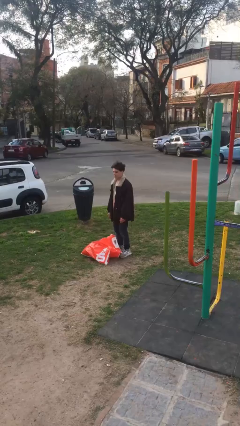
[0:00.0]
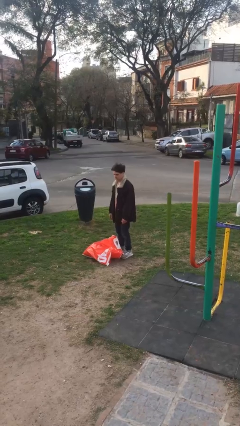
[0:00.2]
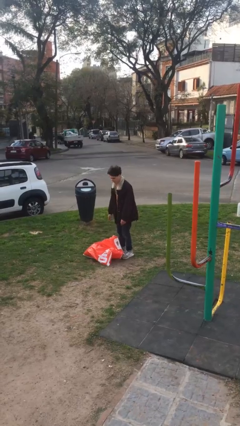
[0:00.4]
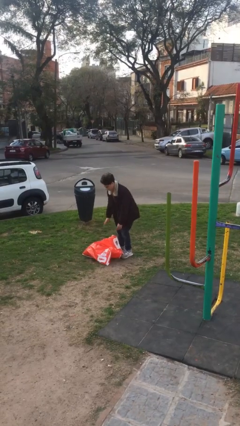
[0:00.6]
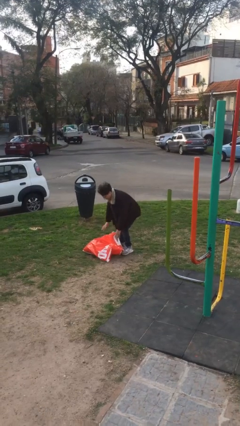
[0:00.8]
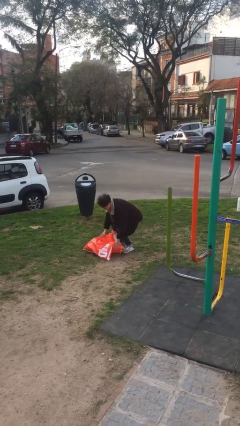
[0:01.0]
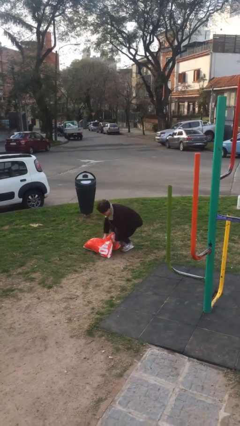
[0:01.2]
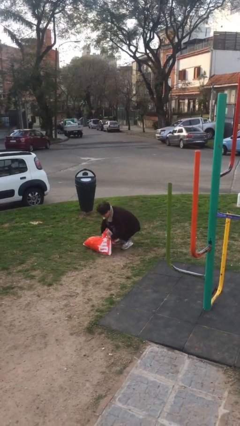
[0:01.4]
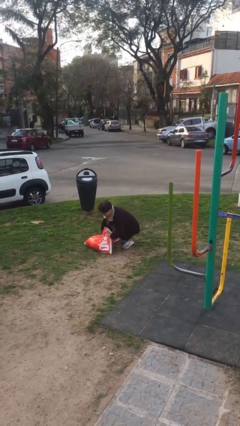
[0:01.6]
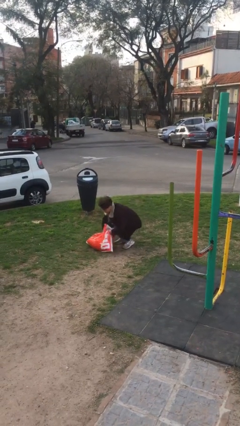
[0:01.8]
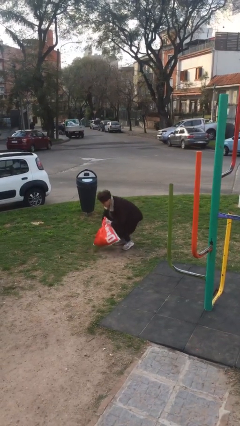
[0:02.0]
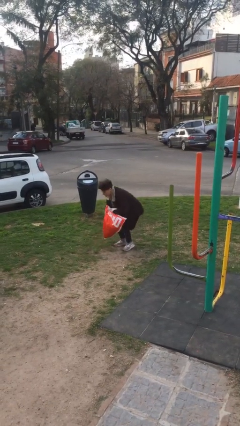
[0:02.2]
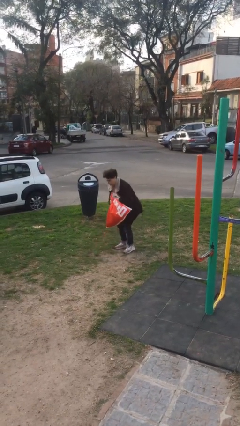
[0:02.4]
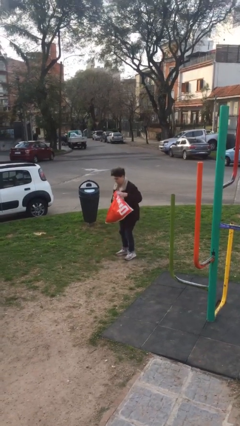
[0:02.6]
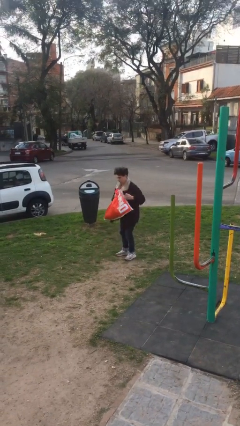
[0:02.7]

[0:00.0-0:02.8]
person picks up object from floor

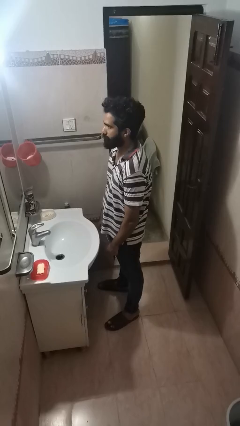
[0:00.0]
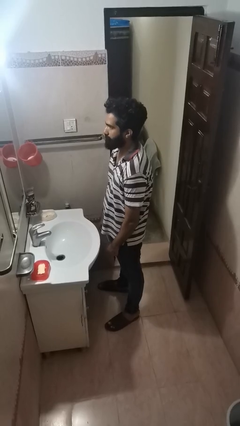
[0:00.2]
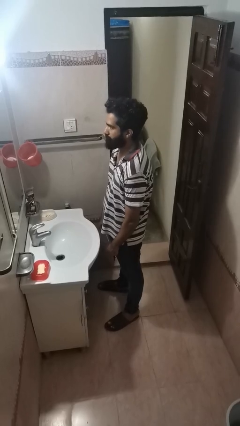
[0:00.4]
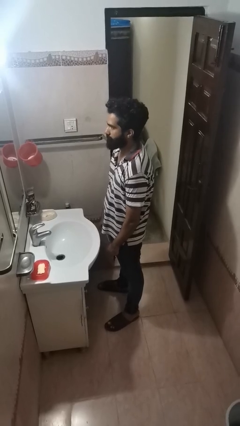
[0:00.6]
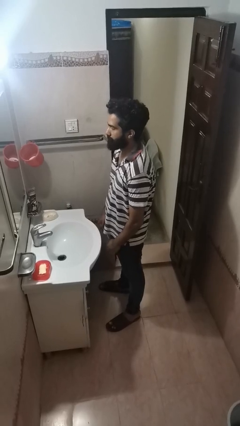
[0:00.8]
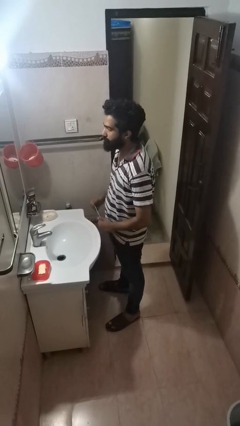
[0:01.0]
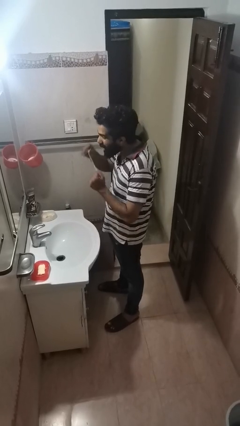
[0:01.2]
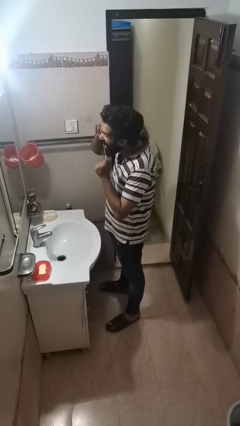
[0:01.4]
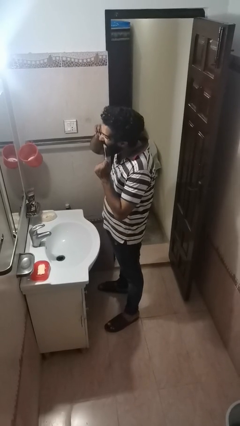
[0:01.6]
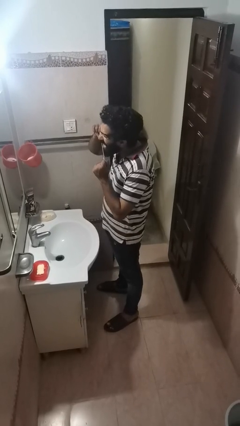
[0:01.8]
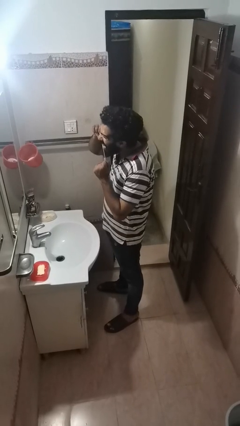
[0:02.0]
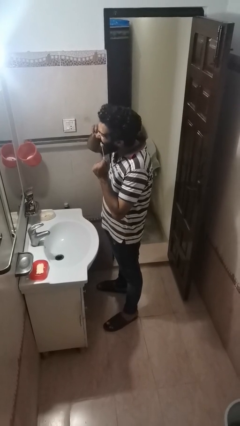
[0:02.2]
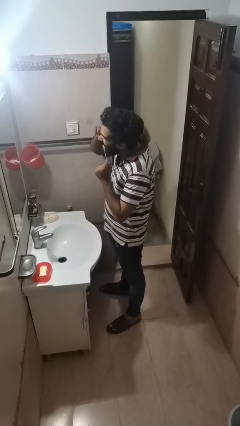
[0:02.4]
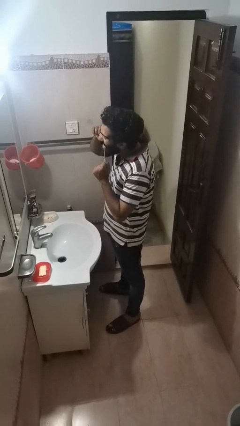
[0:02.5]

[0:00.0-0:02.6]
person flosses

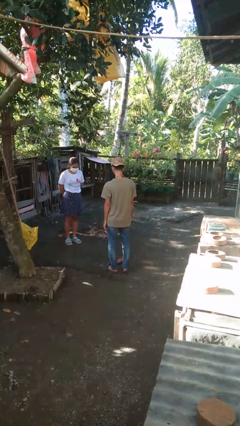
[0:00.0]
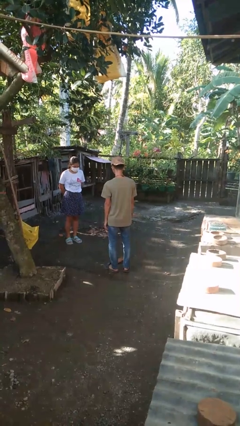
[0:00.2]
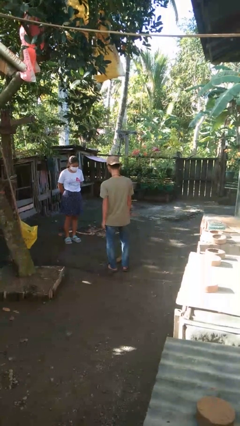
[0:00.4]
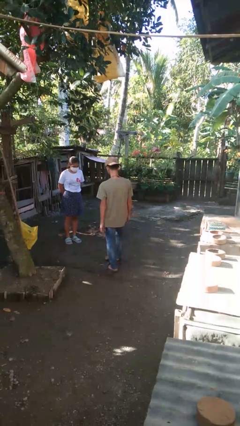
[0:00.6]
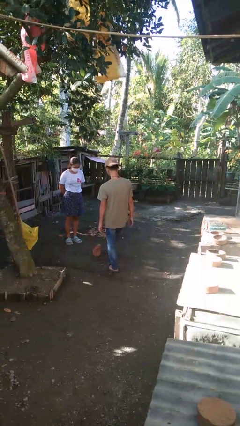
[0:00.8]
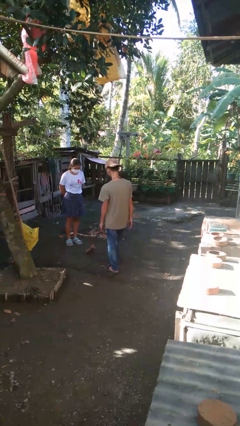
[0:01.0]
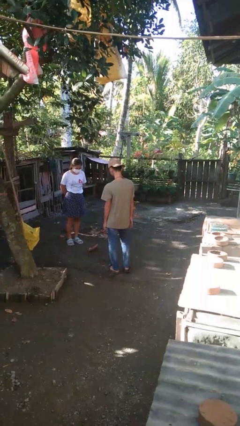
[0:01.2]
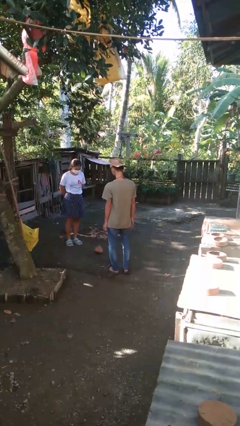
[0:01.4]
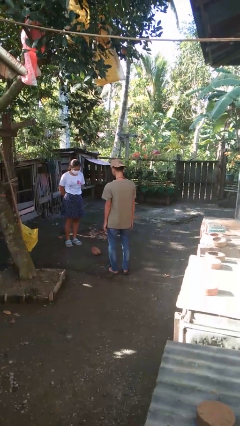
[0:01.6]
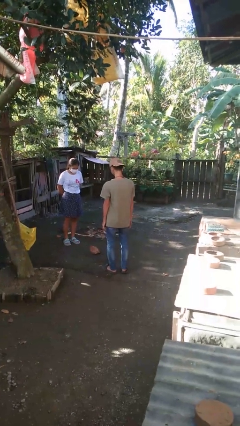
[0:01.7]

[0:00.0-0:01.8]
person kicks object to person

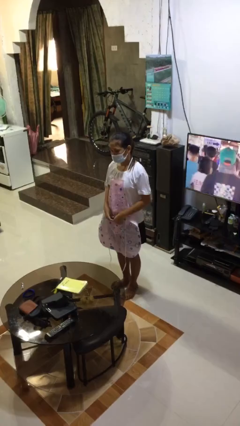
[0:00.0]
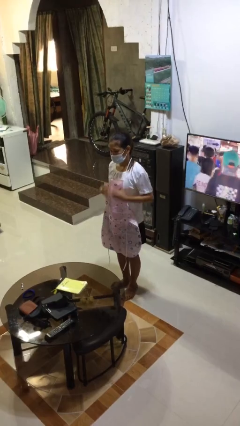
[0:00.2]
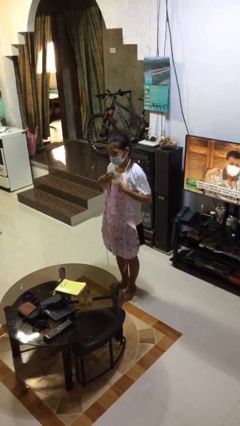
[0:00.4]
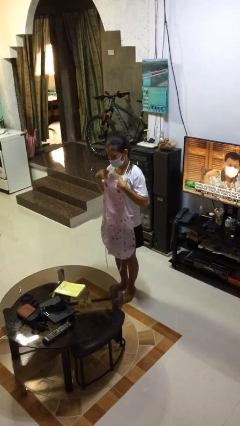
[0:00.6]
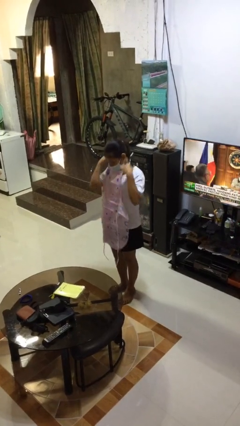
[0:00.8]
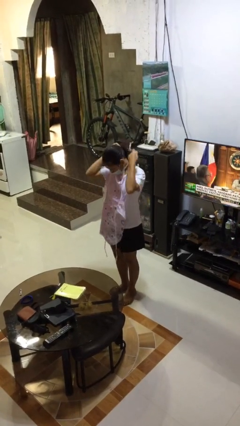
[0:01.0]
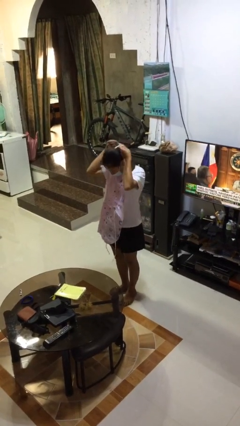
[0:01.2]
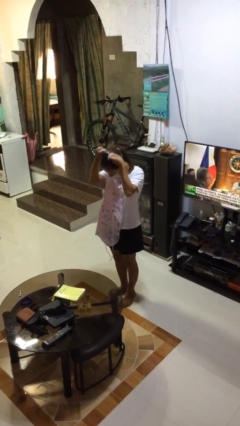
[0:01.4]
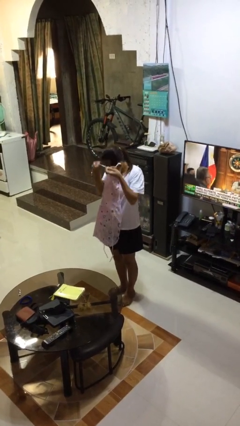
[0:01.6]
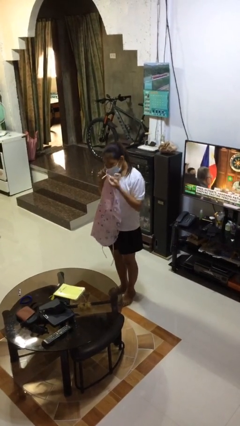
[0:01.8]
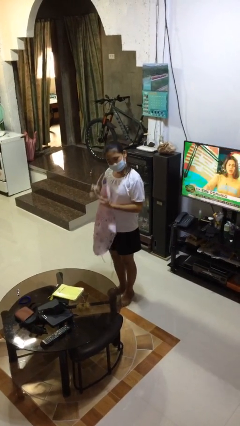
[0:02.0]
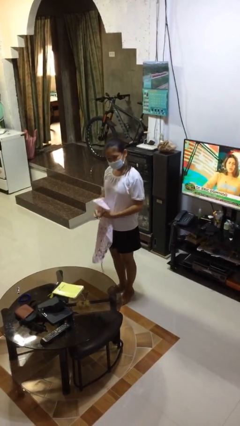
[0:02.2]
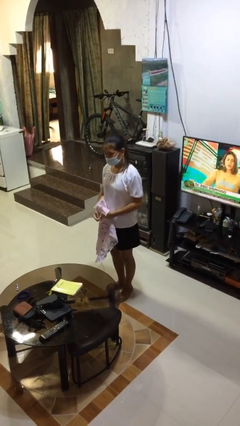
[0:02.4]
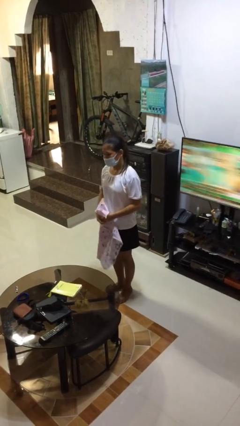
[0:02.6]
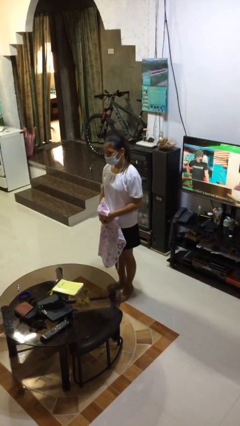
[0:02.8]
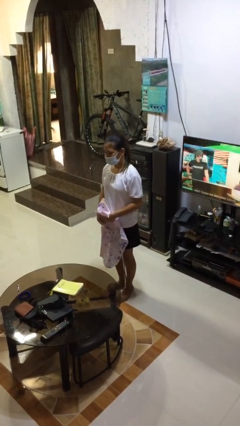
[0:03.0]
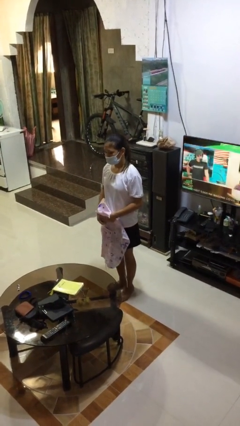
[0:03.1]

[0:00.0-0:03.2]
person takes off apron

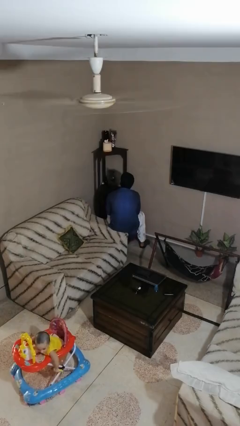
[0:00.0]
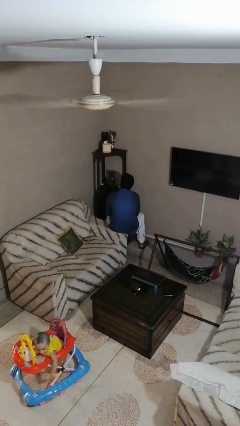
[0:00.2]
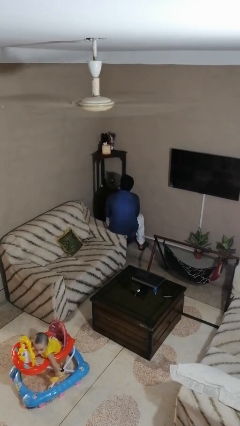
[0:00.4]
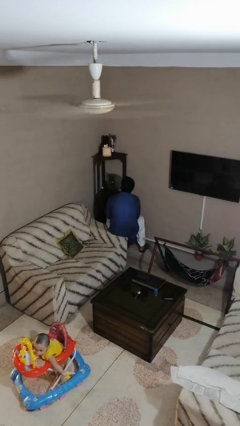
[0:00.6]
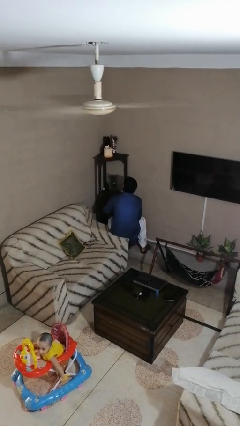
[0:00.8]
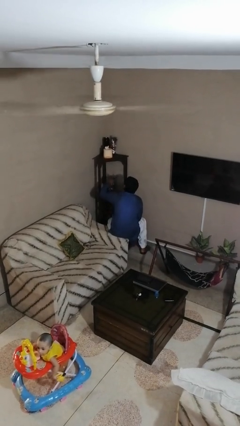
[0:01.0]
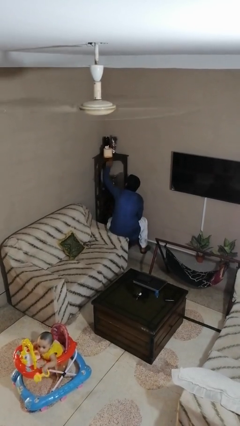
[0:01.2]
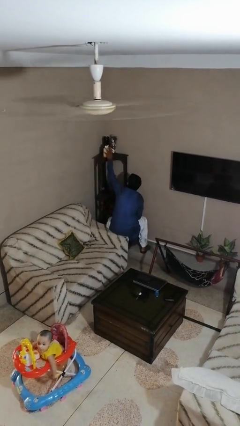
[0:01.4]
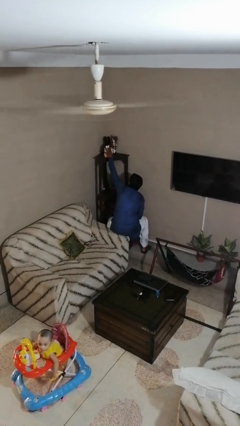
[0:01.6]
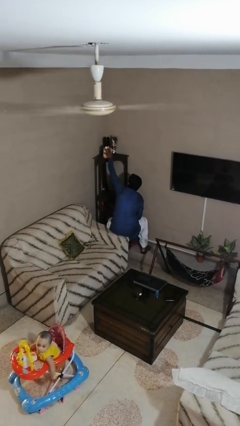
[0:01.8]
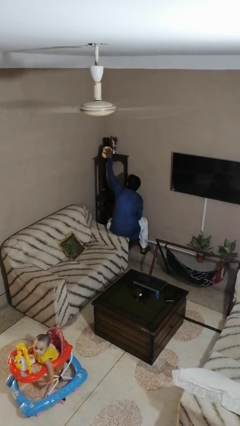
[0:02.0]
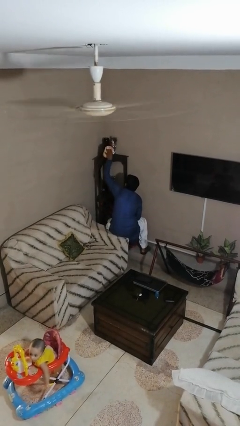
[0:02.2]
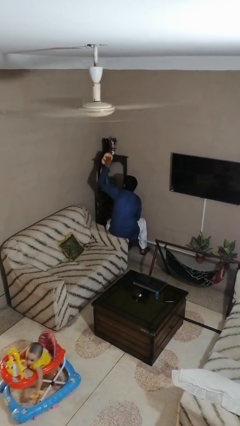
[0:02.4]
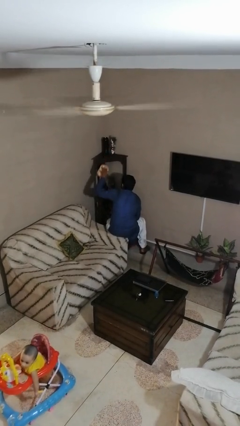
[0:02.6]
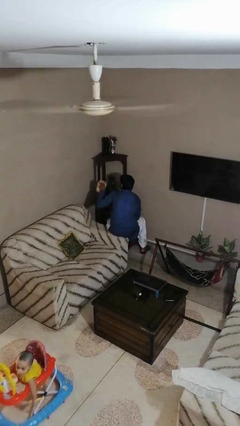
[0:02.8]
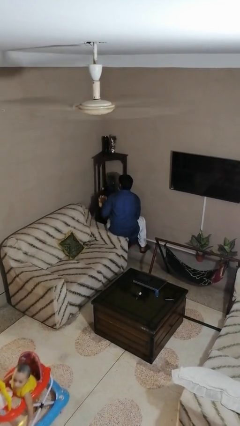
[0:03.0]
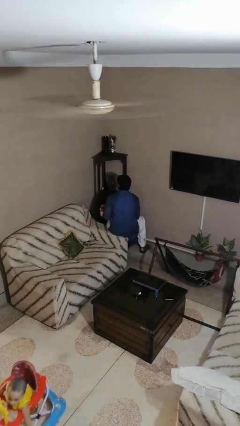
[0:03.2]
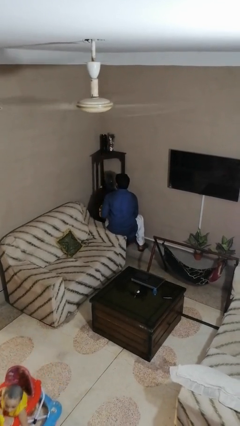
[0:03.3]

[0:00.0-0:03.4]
person picks up object from shelf

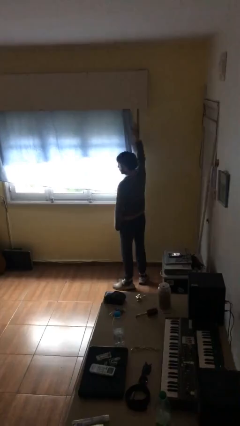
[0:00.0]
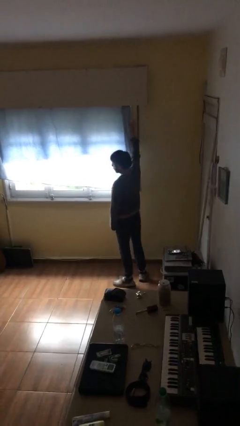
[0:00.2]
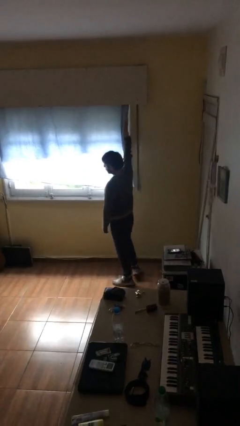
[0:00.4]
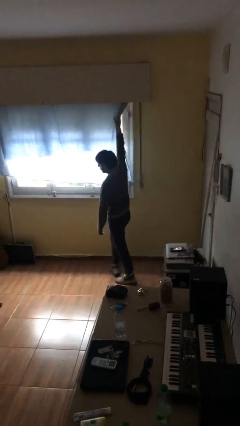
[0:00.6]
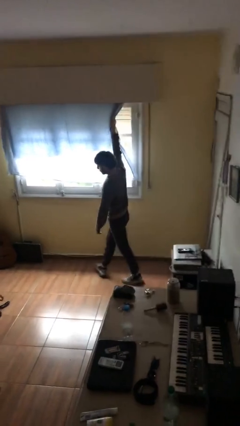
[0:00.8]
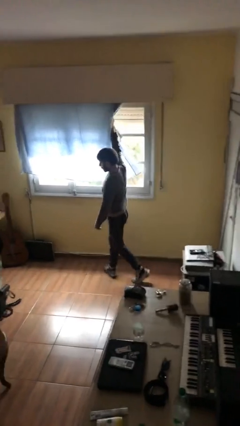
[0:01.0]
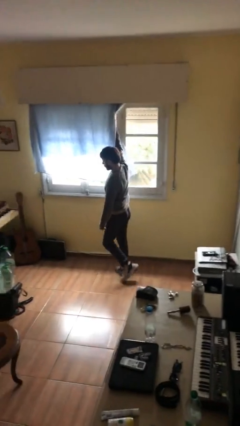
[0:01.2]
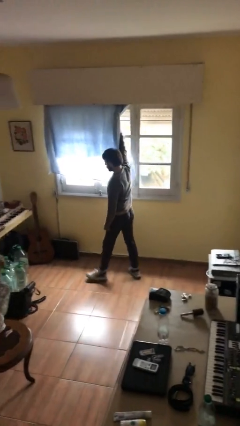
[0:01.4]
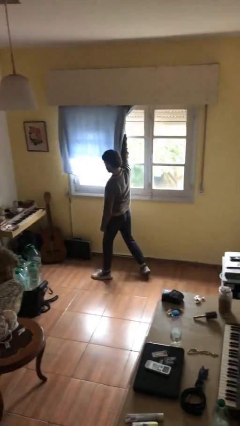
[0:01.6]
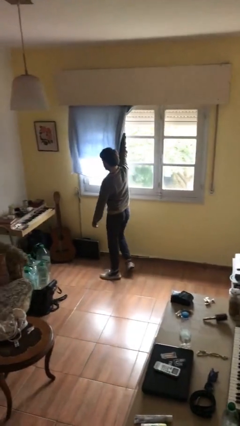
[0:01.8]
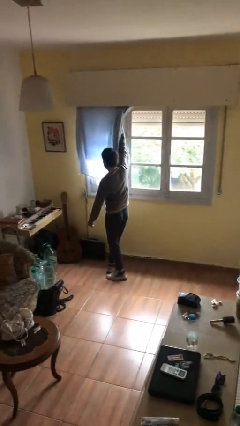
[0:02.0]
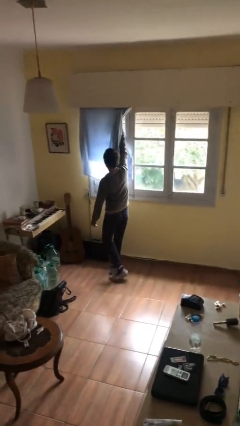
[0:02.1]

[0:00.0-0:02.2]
person opens curtains

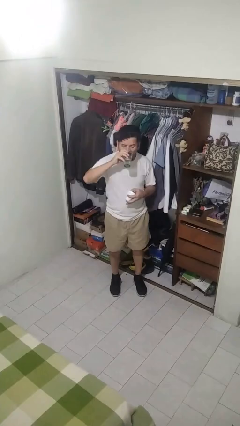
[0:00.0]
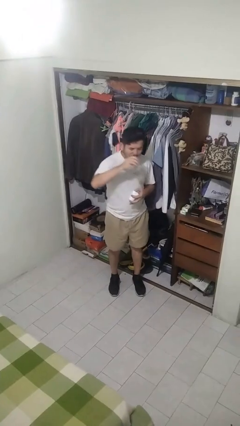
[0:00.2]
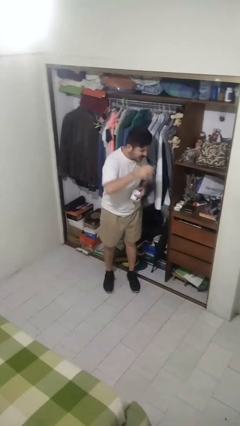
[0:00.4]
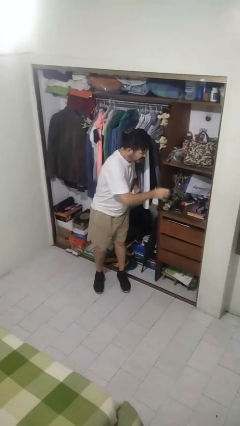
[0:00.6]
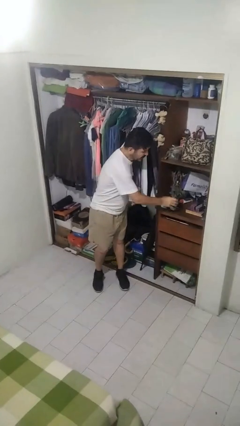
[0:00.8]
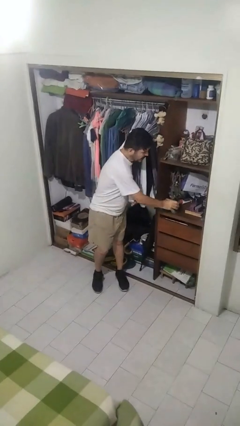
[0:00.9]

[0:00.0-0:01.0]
person drinks from cup
